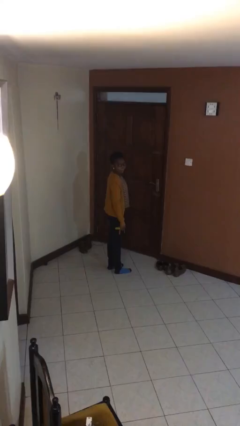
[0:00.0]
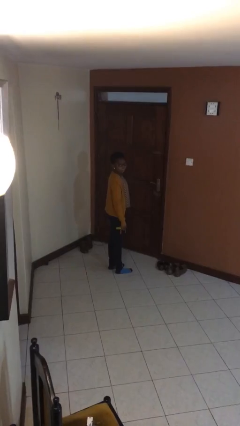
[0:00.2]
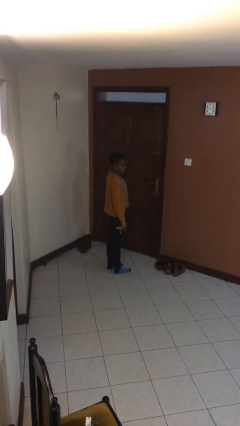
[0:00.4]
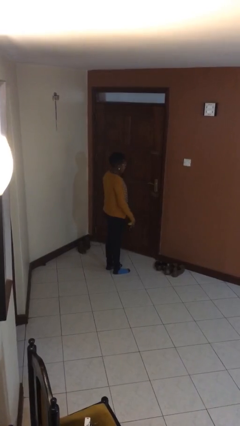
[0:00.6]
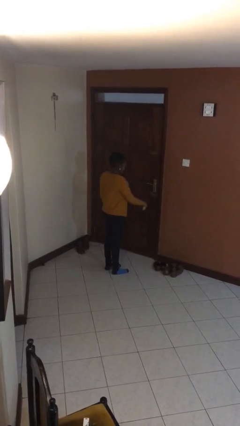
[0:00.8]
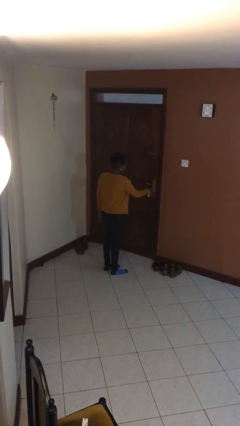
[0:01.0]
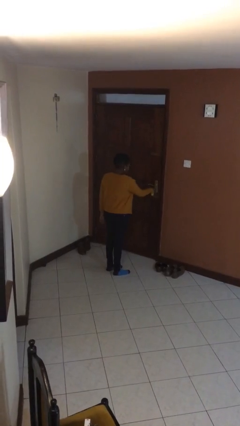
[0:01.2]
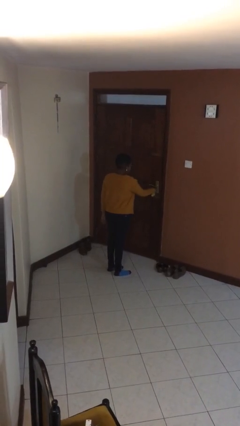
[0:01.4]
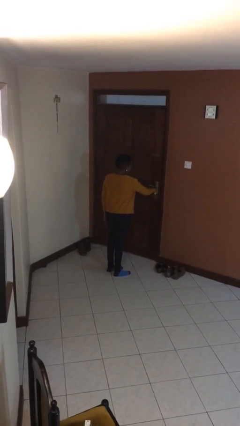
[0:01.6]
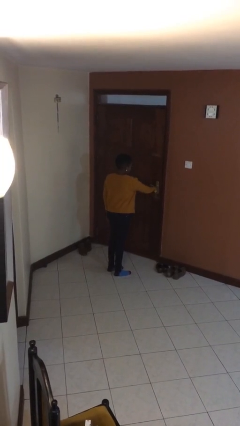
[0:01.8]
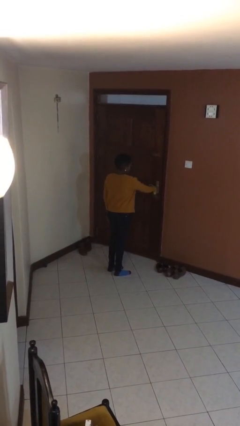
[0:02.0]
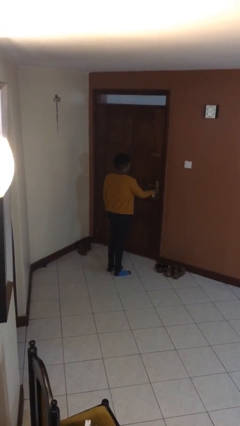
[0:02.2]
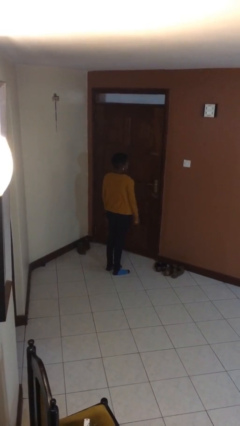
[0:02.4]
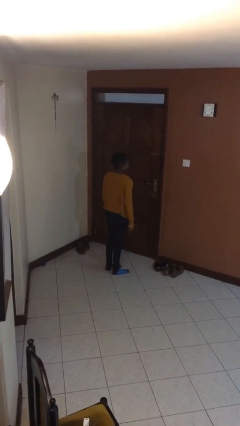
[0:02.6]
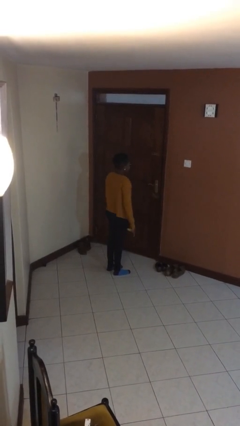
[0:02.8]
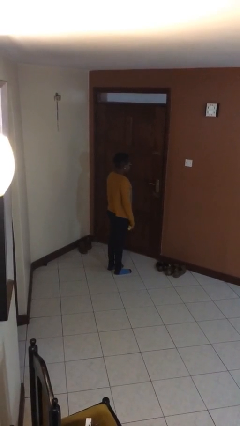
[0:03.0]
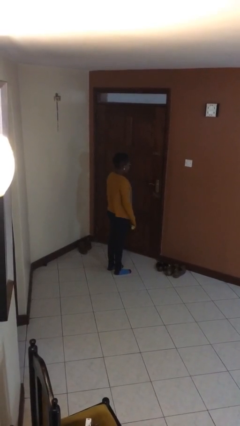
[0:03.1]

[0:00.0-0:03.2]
person unlocks door with keys

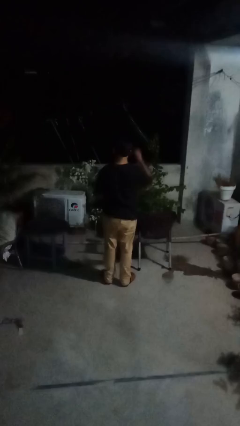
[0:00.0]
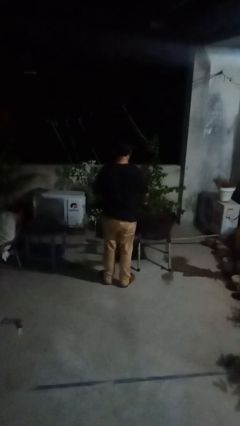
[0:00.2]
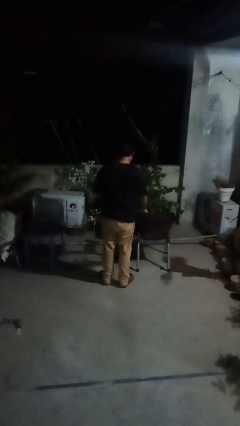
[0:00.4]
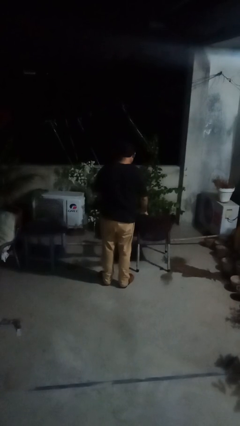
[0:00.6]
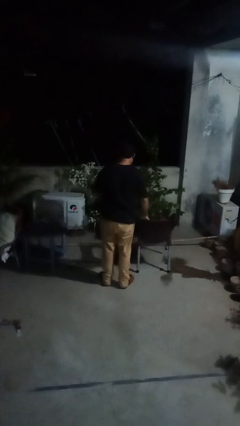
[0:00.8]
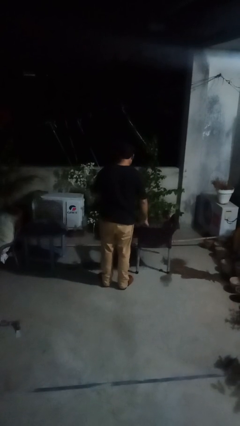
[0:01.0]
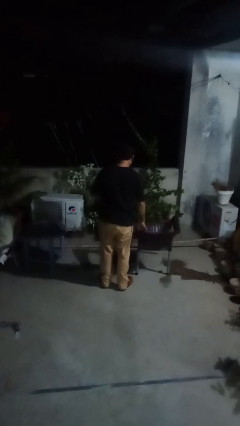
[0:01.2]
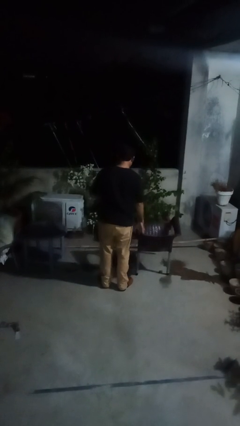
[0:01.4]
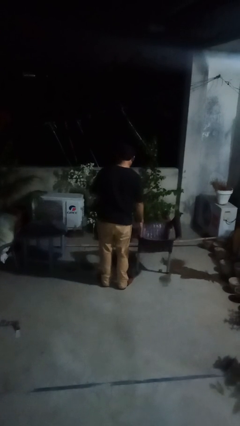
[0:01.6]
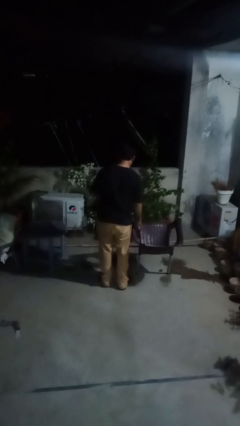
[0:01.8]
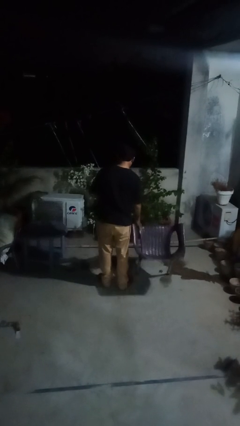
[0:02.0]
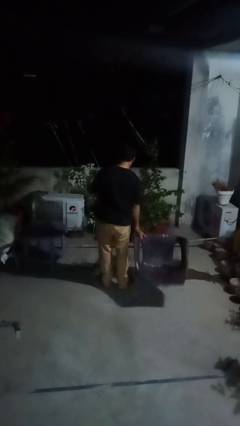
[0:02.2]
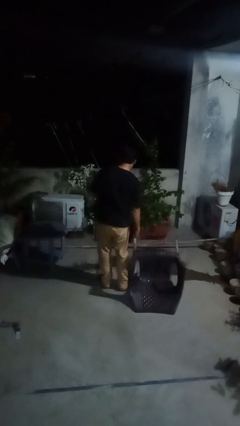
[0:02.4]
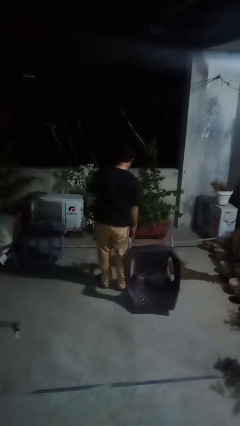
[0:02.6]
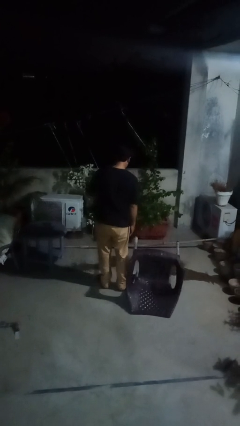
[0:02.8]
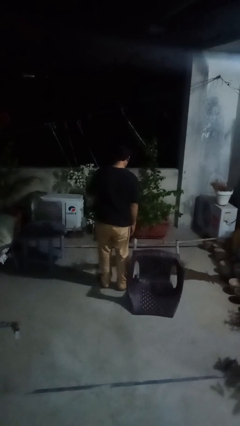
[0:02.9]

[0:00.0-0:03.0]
person knocks over furniture

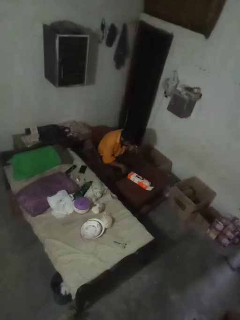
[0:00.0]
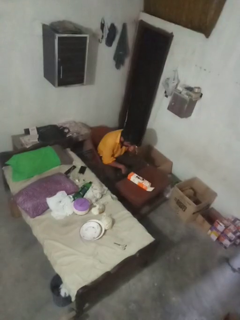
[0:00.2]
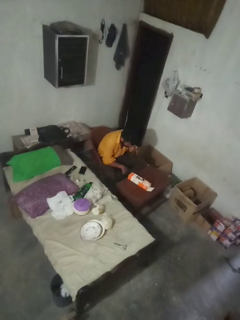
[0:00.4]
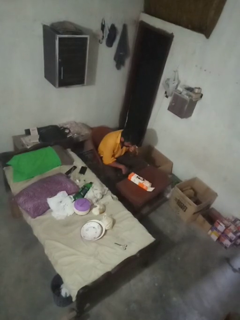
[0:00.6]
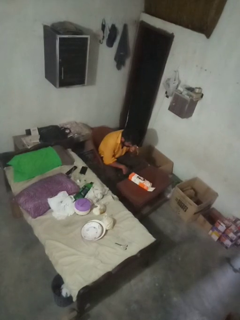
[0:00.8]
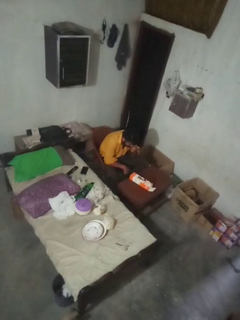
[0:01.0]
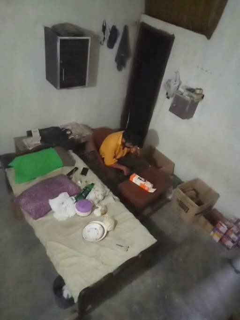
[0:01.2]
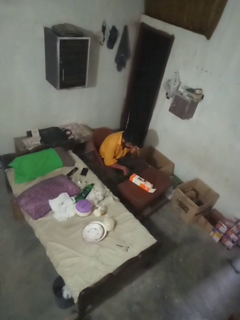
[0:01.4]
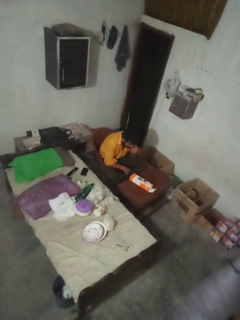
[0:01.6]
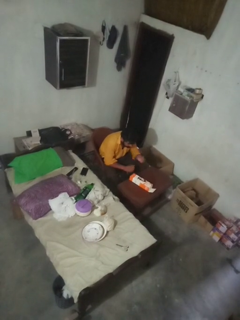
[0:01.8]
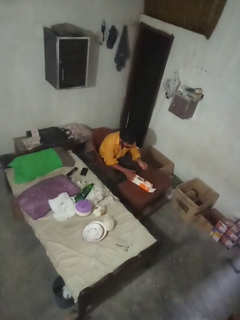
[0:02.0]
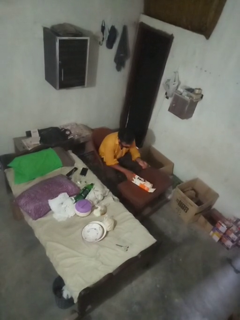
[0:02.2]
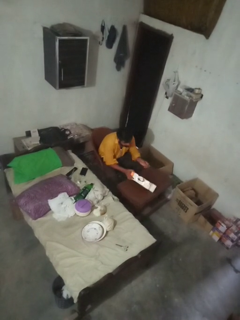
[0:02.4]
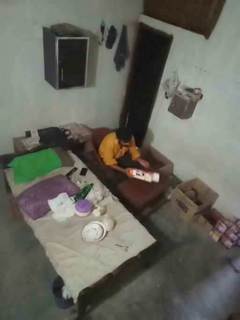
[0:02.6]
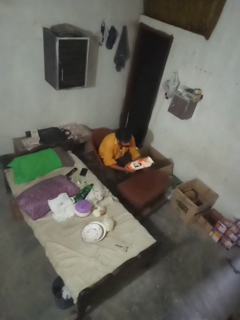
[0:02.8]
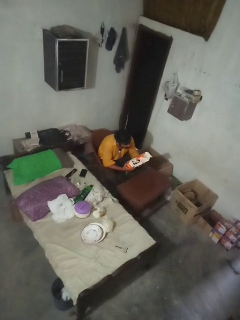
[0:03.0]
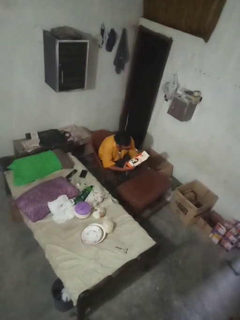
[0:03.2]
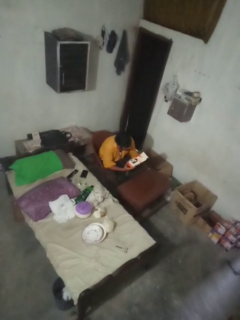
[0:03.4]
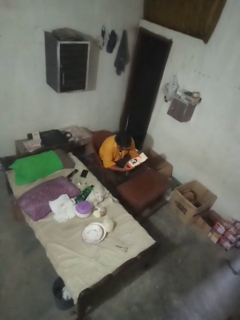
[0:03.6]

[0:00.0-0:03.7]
person picks up object from countertop

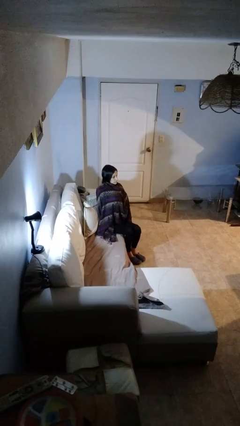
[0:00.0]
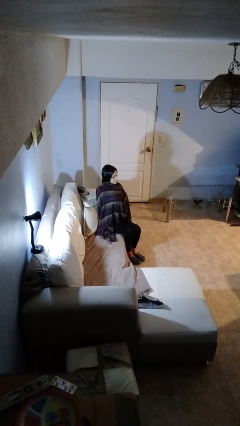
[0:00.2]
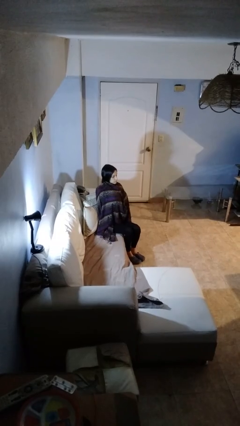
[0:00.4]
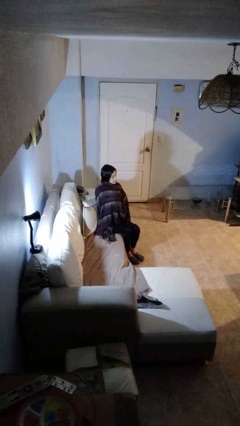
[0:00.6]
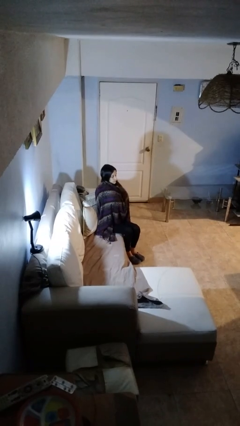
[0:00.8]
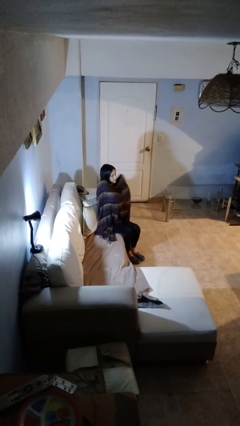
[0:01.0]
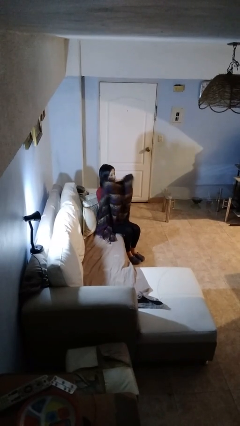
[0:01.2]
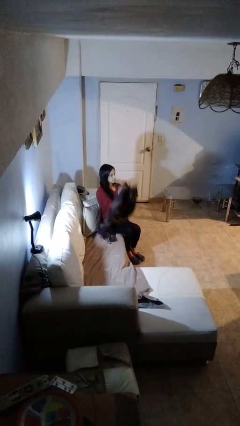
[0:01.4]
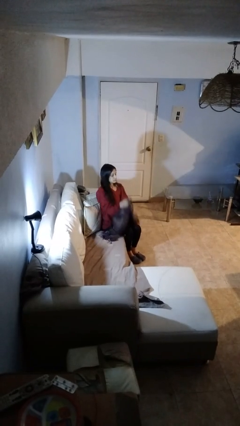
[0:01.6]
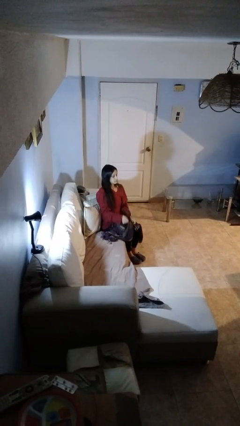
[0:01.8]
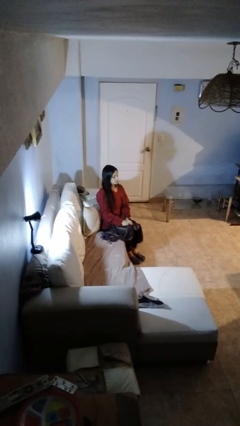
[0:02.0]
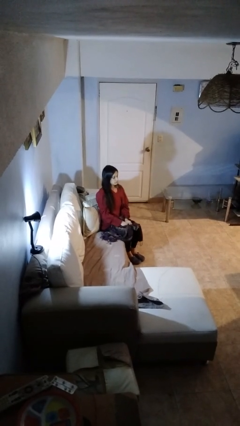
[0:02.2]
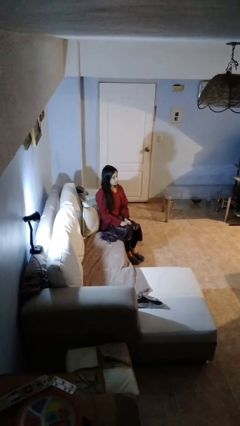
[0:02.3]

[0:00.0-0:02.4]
person uncovers with blanket

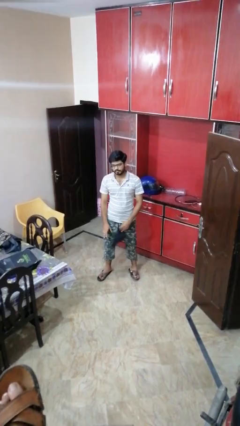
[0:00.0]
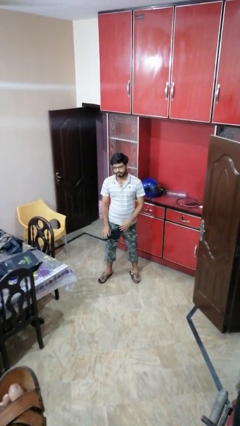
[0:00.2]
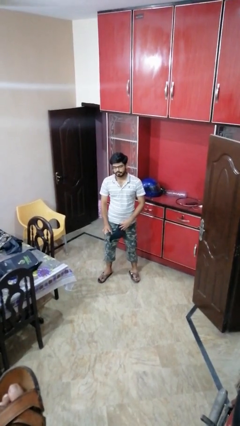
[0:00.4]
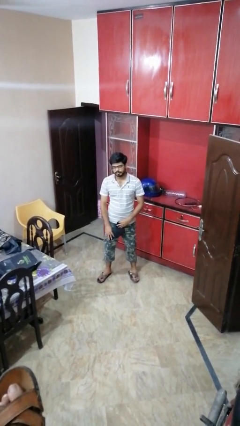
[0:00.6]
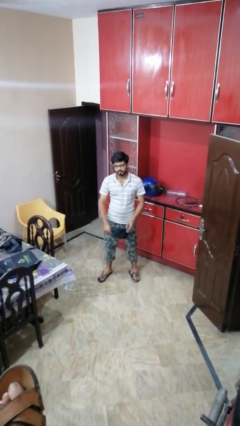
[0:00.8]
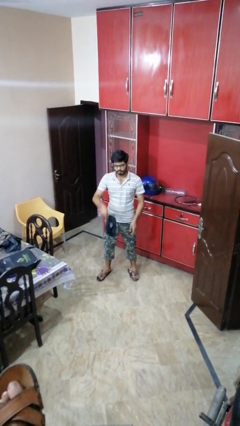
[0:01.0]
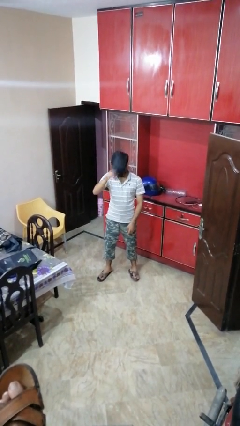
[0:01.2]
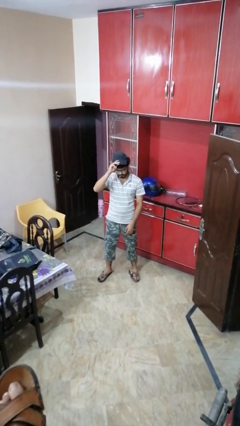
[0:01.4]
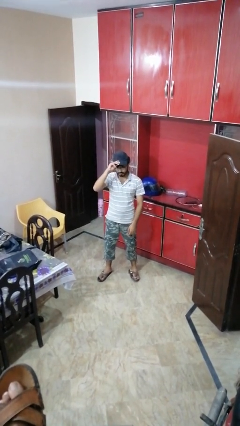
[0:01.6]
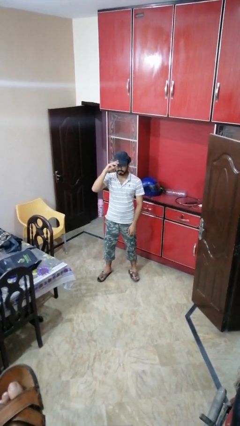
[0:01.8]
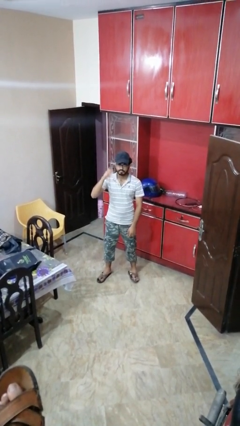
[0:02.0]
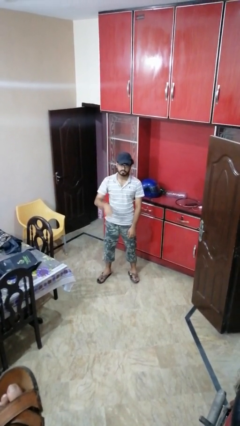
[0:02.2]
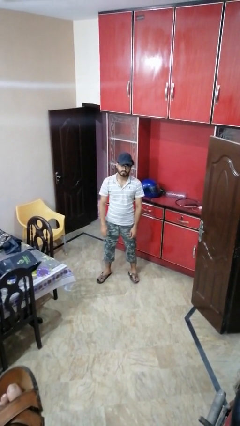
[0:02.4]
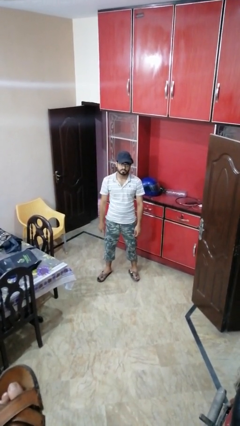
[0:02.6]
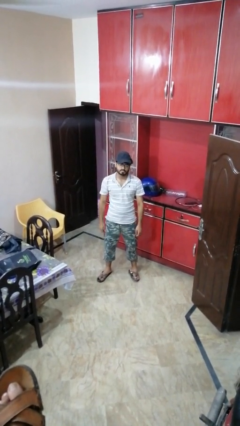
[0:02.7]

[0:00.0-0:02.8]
person puts on hat

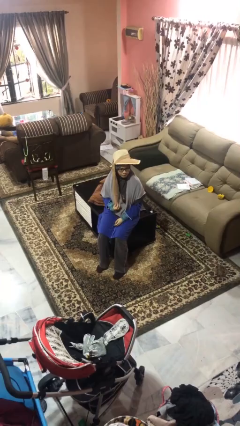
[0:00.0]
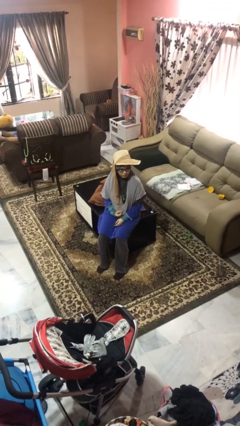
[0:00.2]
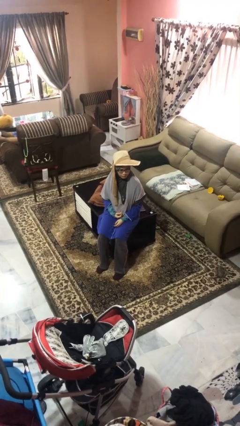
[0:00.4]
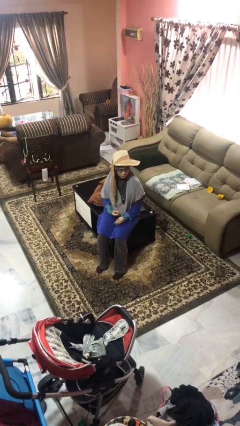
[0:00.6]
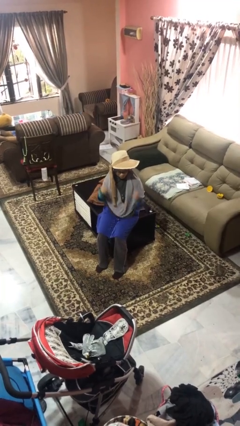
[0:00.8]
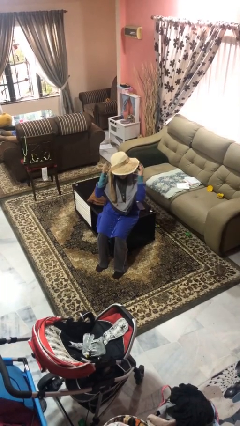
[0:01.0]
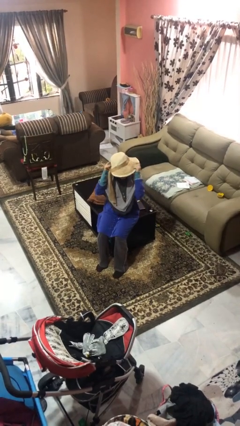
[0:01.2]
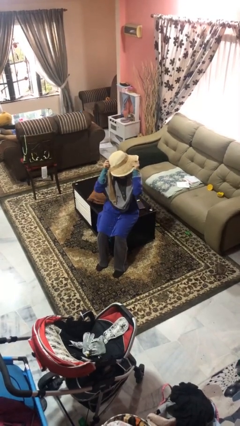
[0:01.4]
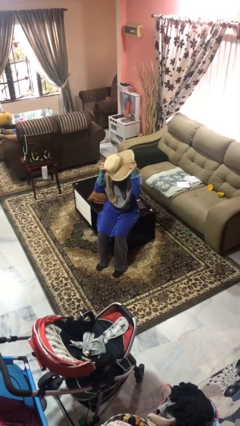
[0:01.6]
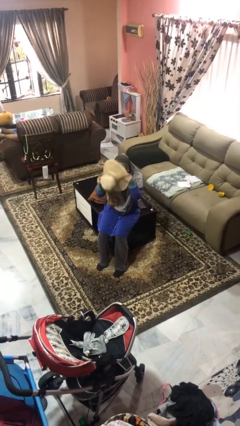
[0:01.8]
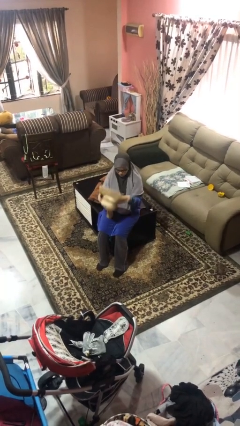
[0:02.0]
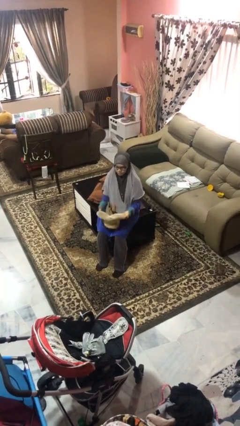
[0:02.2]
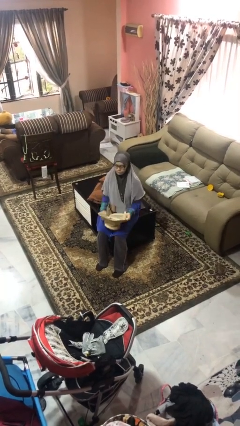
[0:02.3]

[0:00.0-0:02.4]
person takes off hat

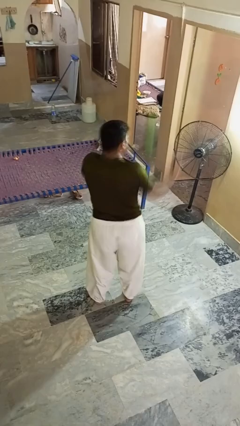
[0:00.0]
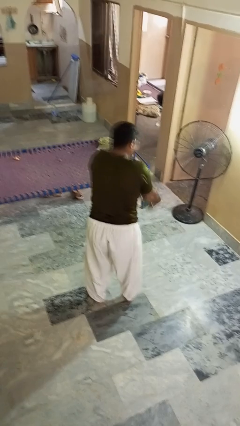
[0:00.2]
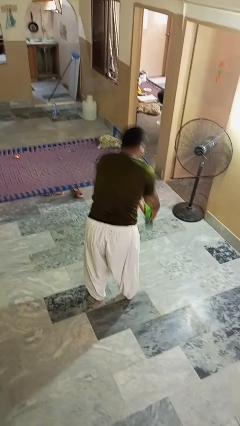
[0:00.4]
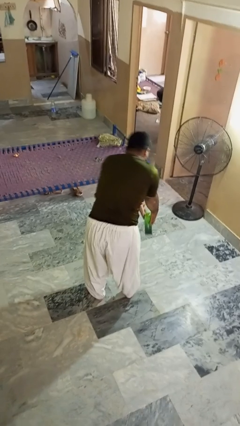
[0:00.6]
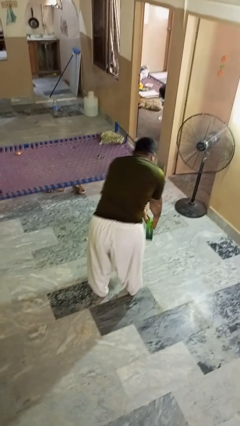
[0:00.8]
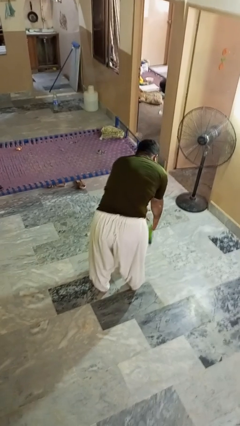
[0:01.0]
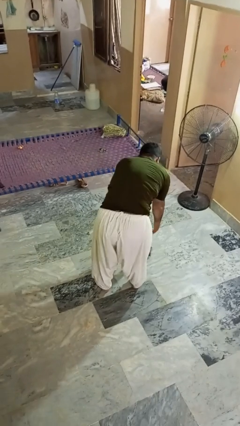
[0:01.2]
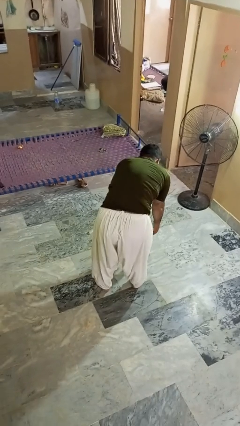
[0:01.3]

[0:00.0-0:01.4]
person catches dropped object
